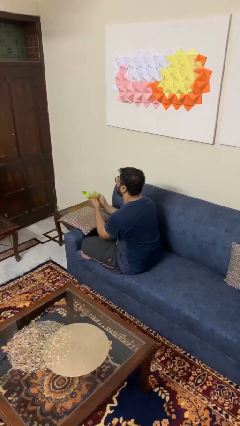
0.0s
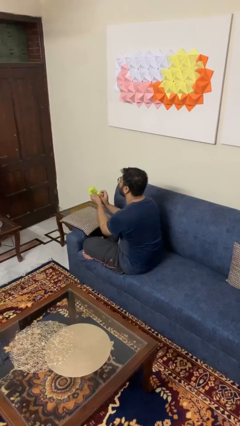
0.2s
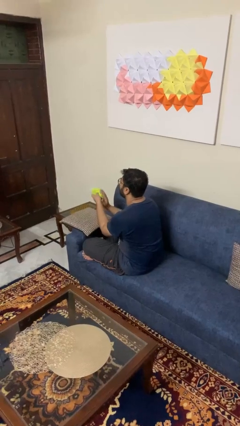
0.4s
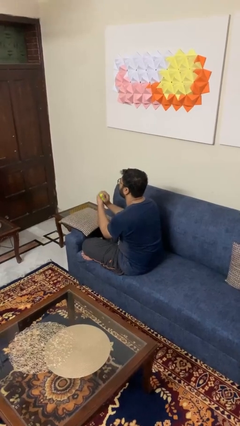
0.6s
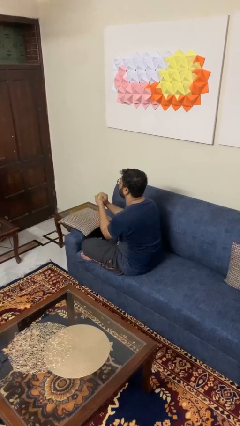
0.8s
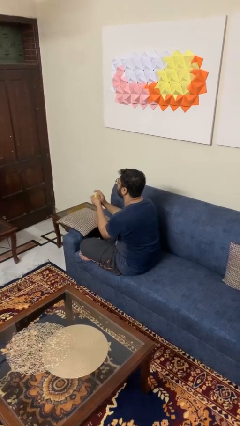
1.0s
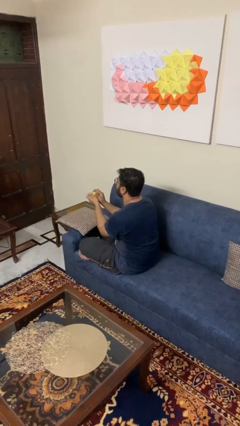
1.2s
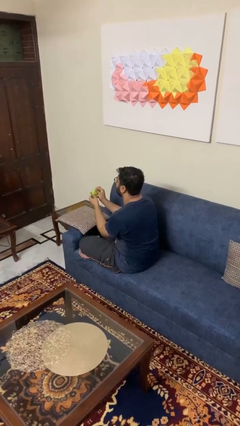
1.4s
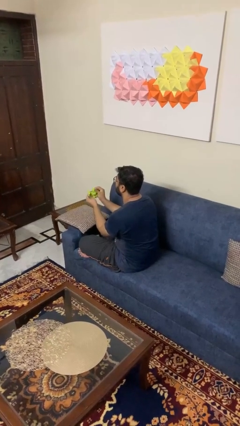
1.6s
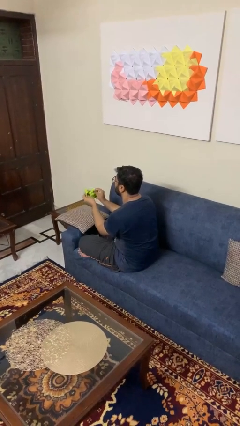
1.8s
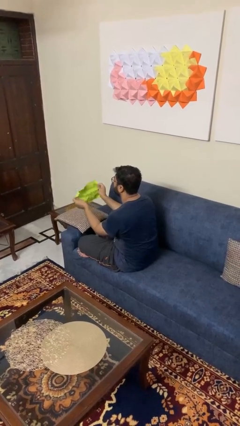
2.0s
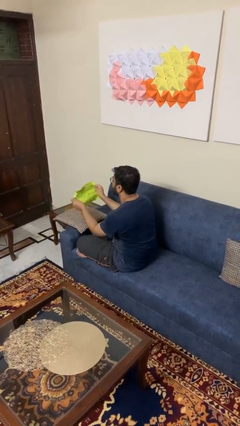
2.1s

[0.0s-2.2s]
person crumples paper

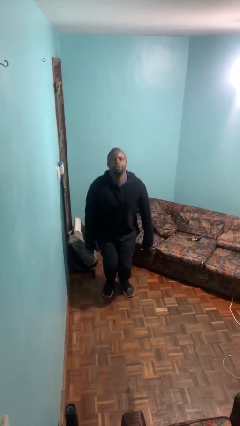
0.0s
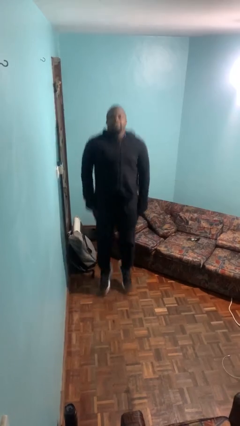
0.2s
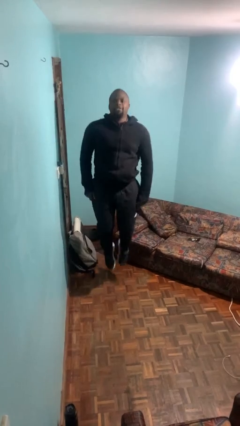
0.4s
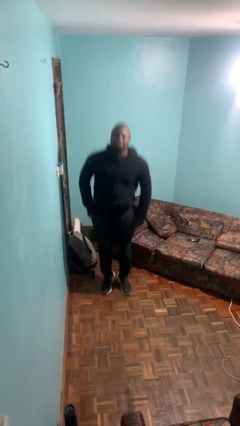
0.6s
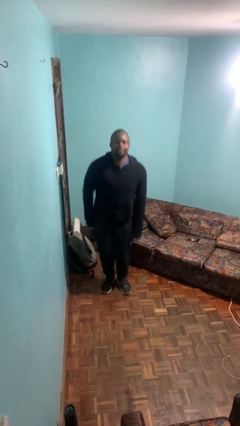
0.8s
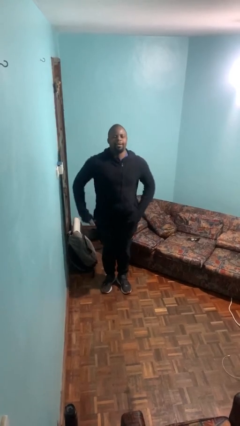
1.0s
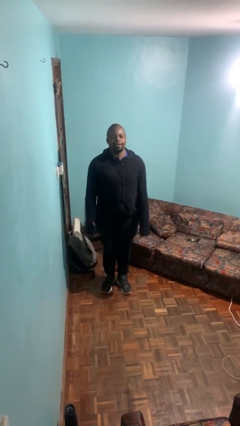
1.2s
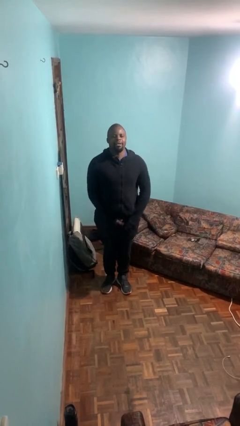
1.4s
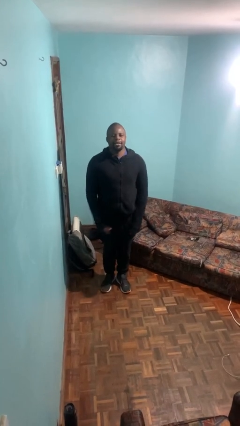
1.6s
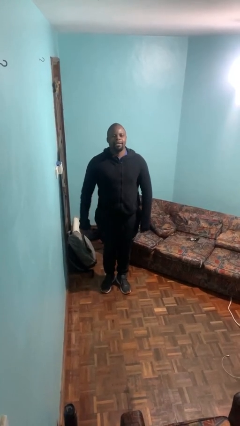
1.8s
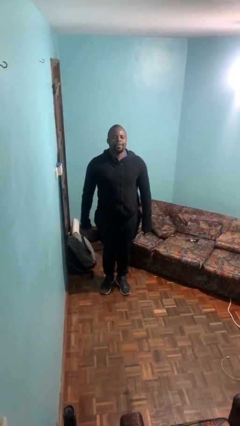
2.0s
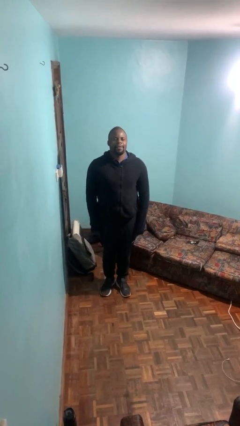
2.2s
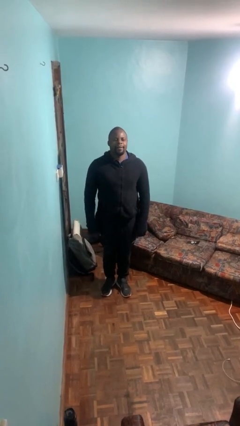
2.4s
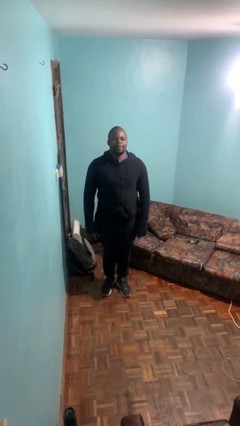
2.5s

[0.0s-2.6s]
person jumps

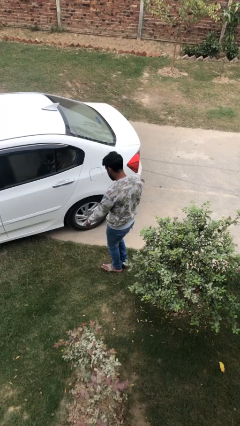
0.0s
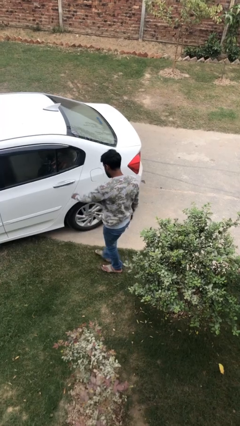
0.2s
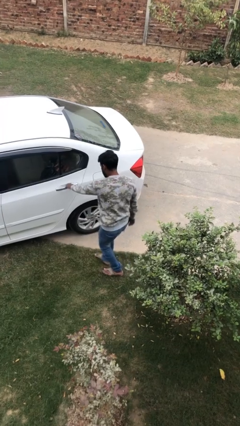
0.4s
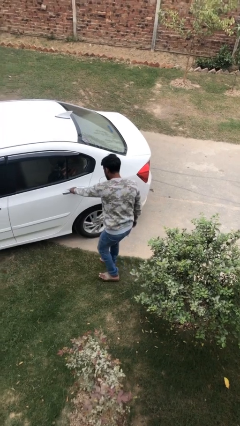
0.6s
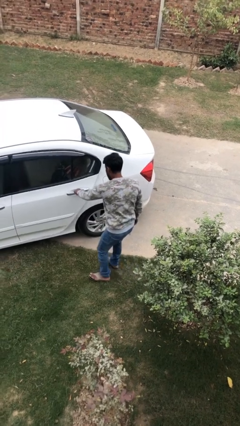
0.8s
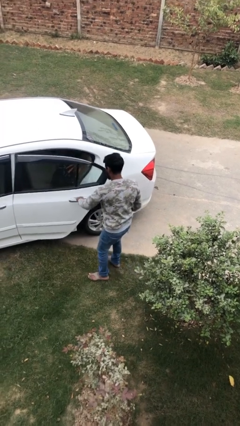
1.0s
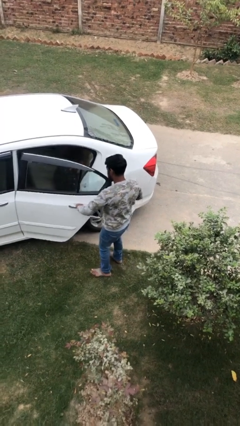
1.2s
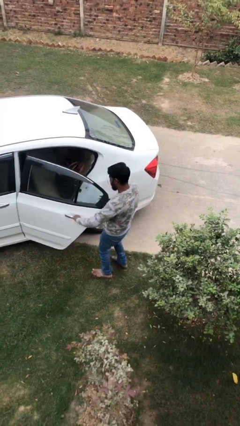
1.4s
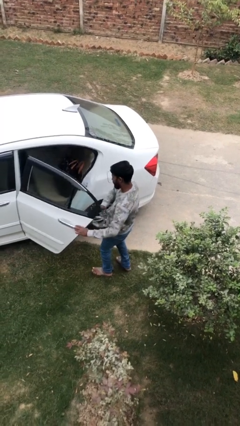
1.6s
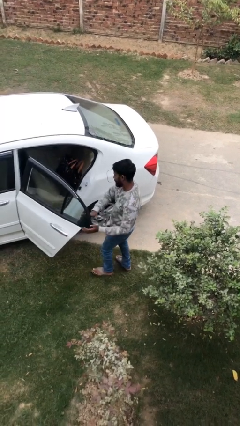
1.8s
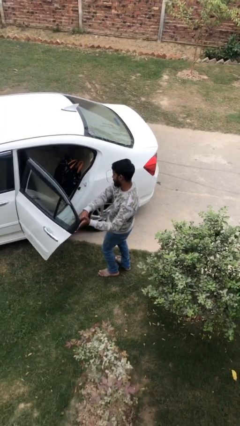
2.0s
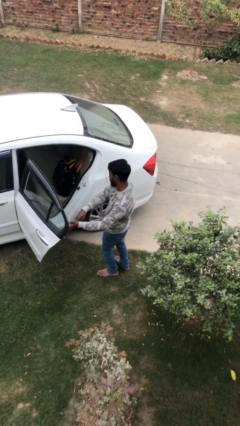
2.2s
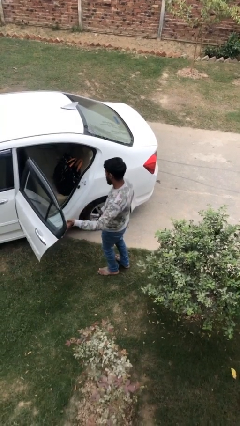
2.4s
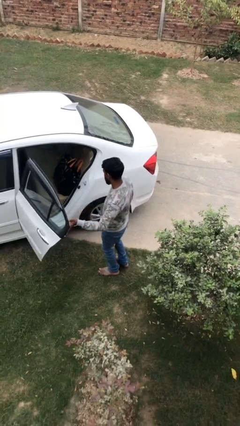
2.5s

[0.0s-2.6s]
person opens car door

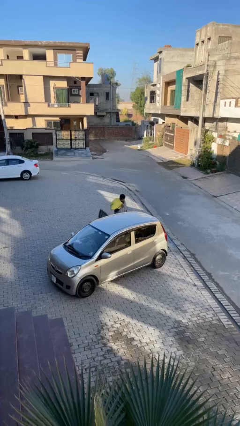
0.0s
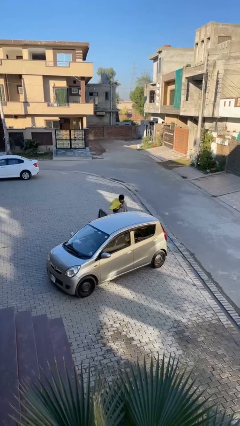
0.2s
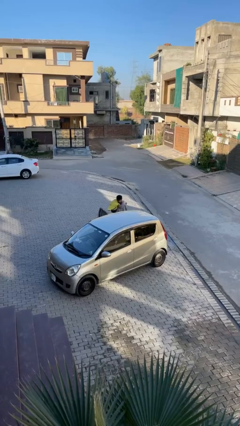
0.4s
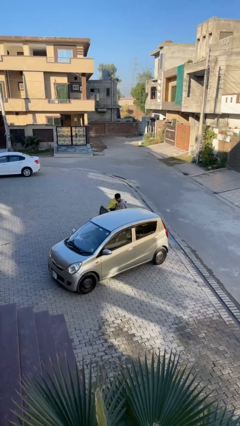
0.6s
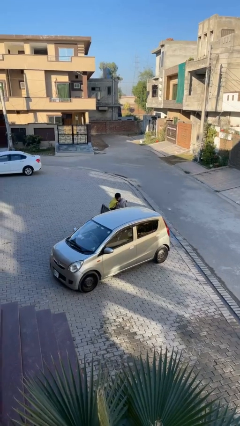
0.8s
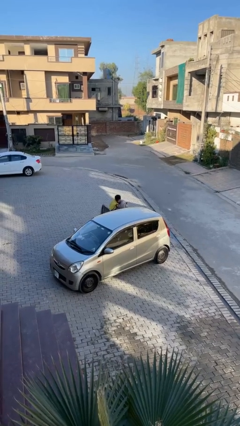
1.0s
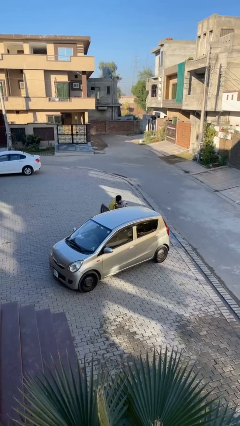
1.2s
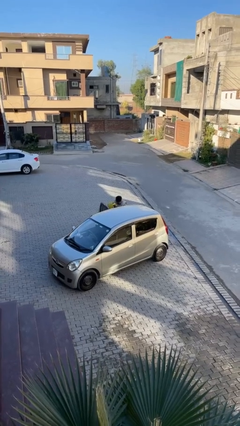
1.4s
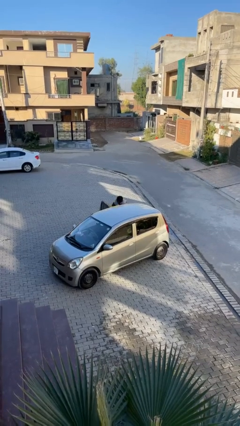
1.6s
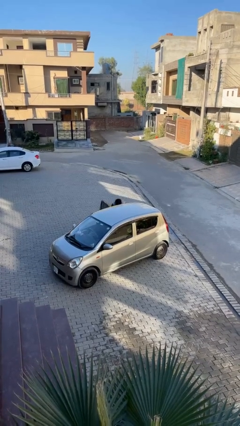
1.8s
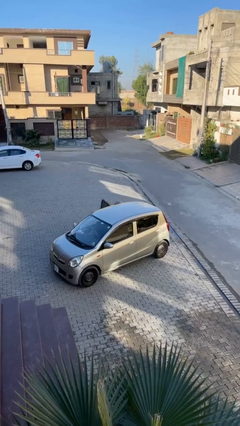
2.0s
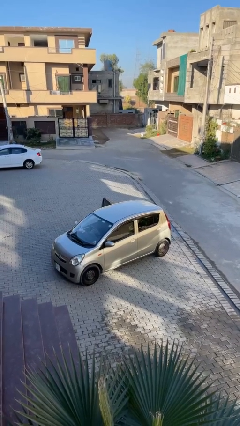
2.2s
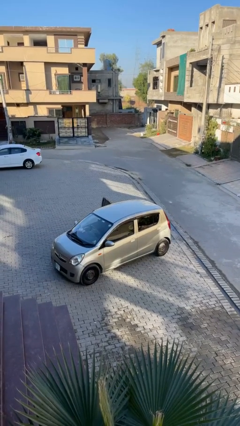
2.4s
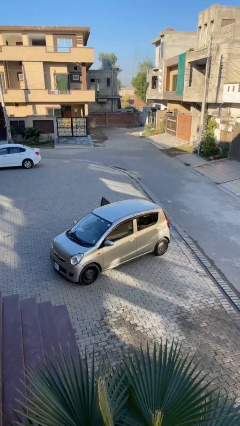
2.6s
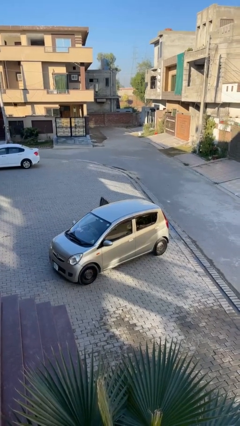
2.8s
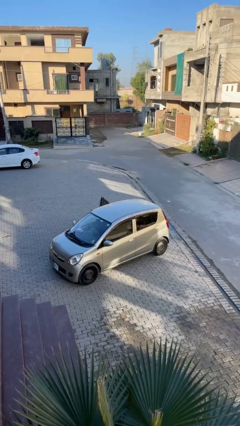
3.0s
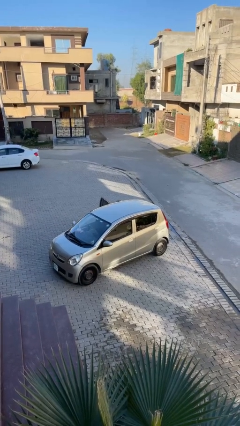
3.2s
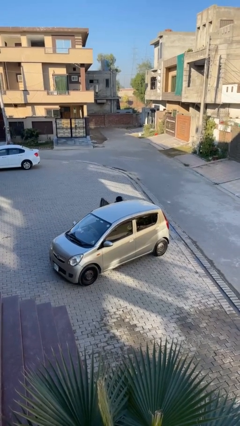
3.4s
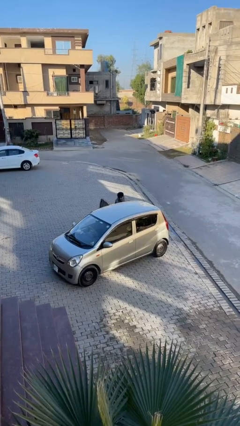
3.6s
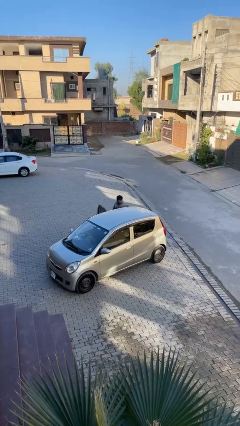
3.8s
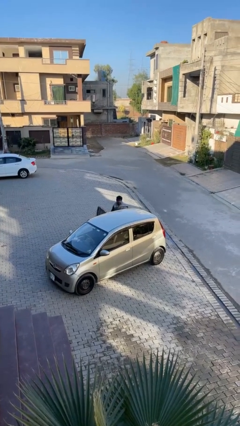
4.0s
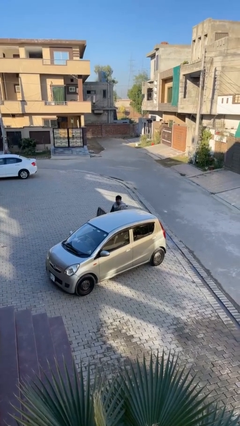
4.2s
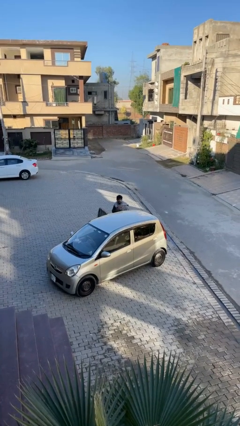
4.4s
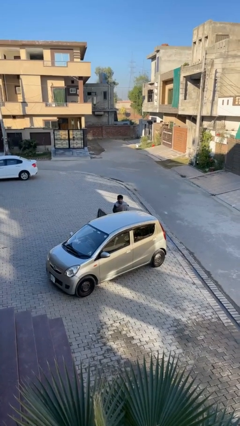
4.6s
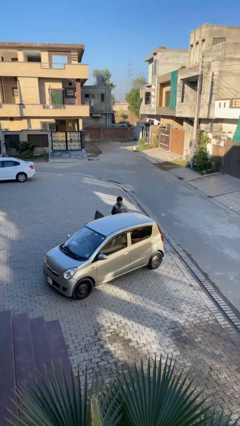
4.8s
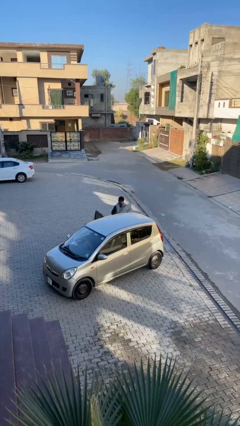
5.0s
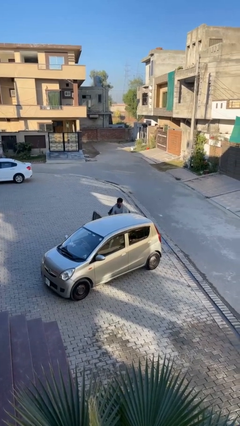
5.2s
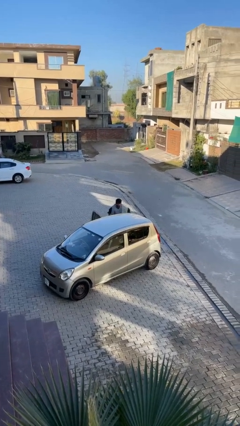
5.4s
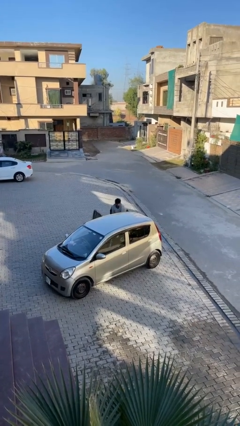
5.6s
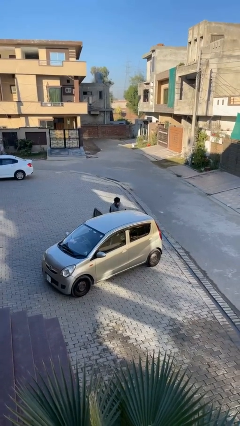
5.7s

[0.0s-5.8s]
person loads car

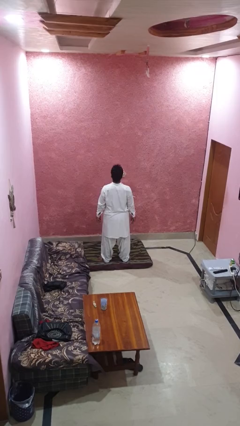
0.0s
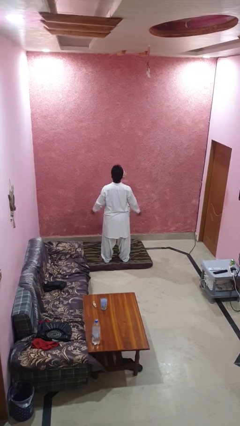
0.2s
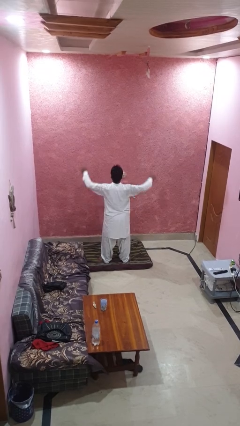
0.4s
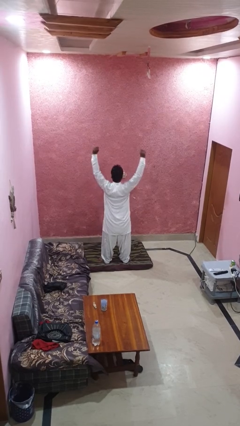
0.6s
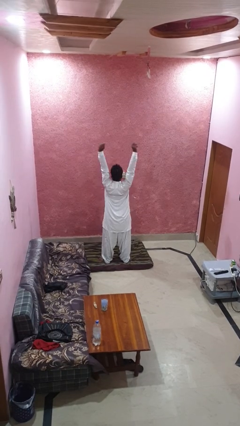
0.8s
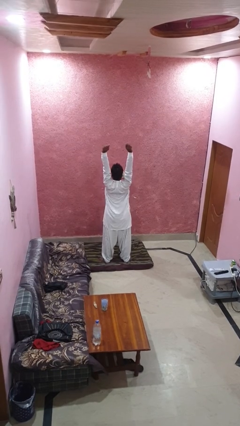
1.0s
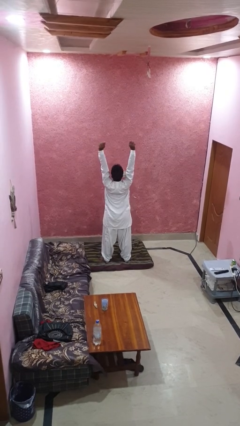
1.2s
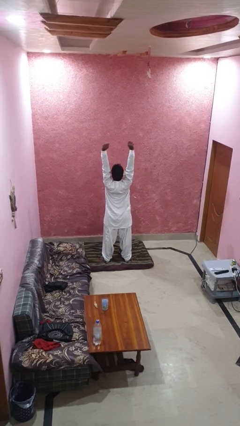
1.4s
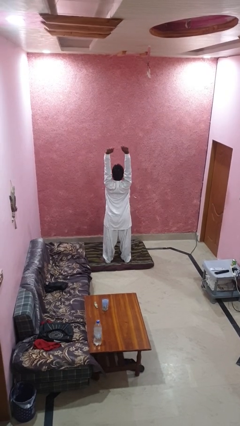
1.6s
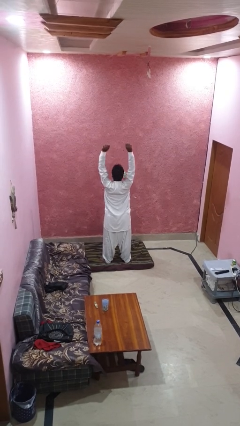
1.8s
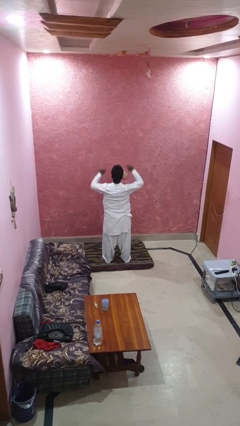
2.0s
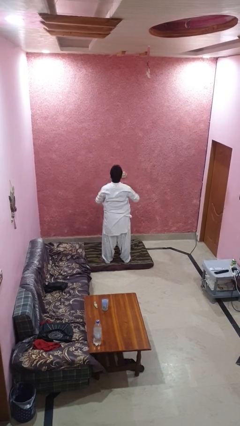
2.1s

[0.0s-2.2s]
person stretches arms over head

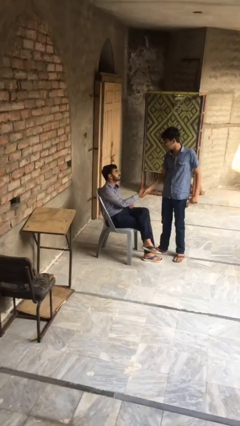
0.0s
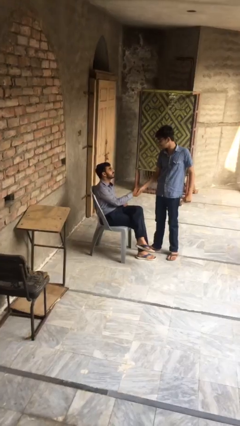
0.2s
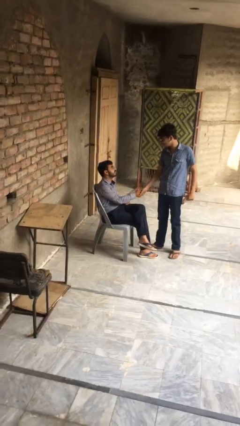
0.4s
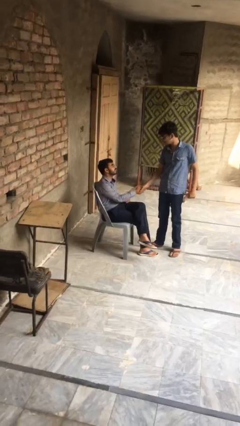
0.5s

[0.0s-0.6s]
person shakes hand

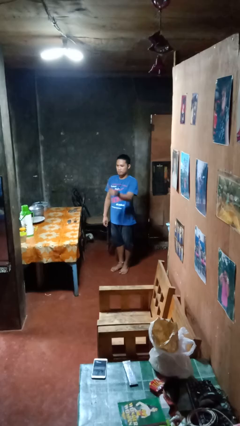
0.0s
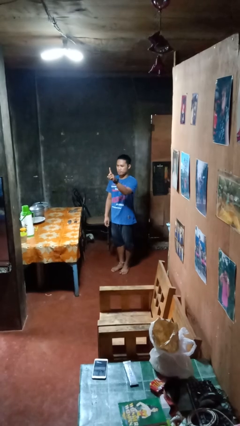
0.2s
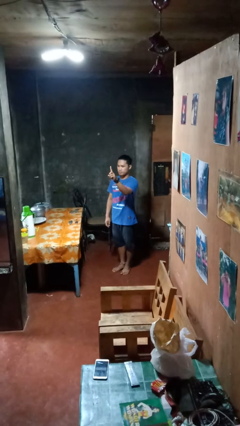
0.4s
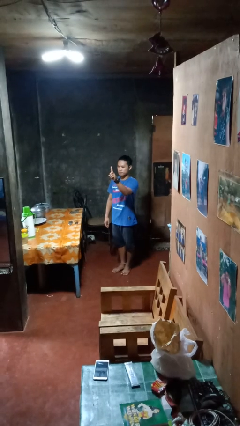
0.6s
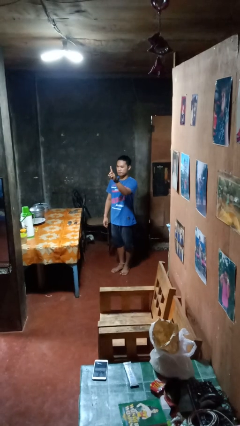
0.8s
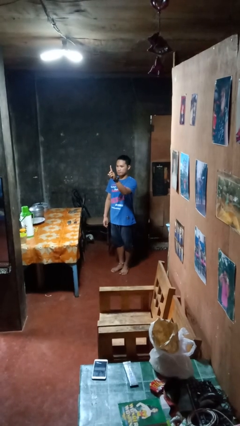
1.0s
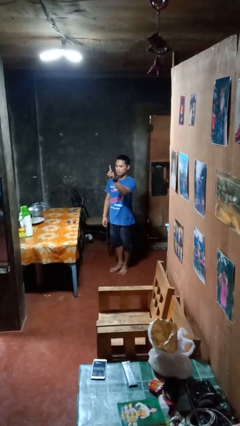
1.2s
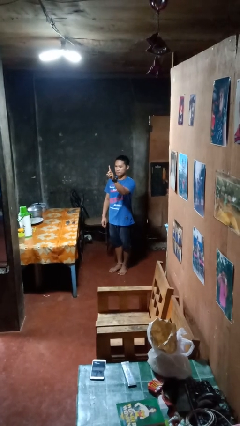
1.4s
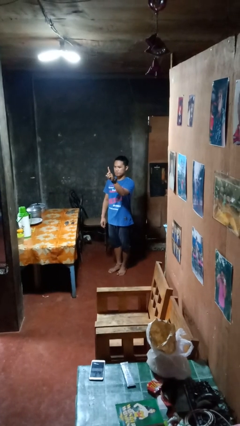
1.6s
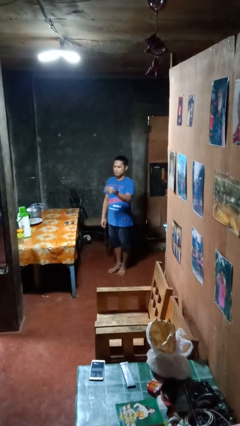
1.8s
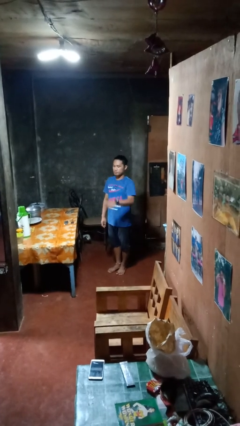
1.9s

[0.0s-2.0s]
person gestures number one
